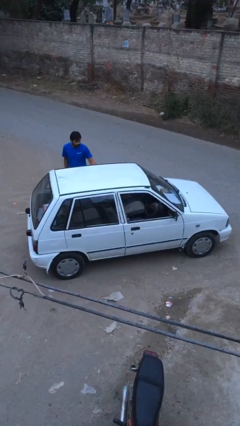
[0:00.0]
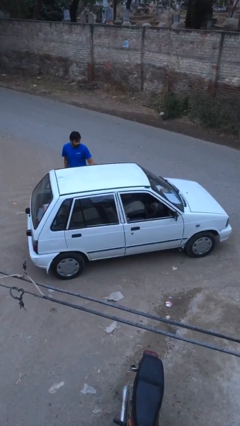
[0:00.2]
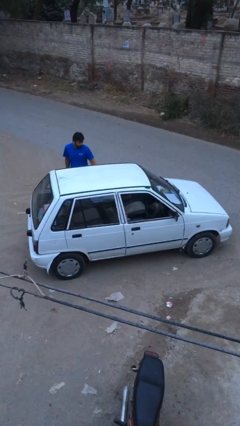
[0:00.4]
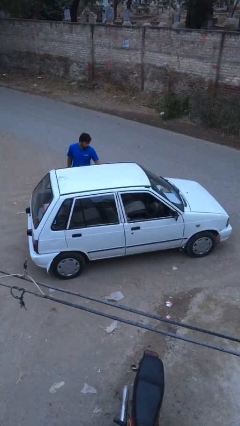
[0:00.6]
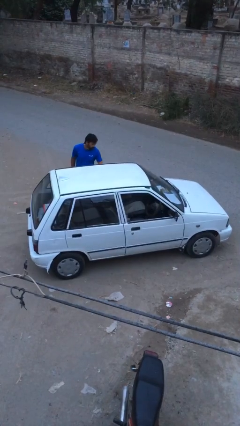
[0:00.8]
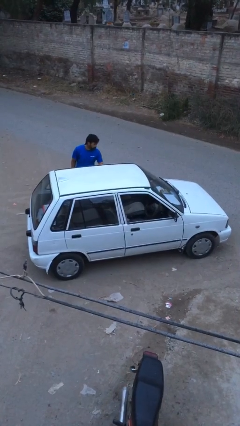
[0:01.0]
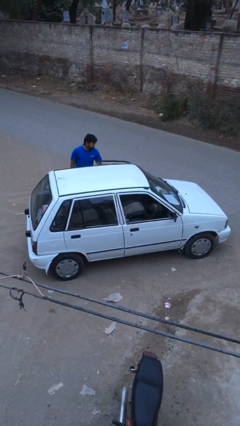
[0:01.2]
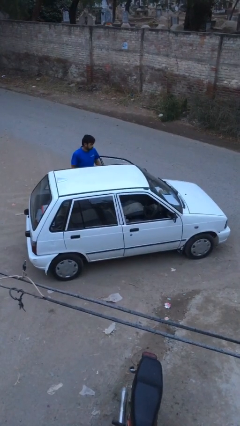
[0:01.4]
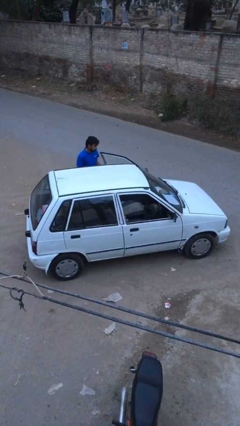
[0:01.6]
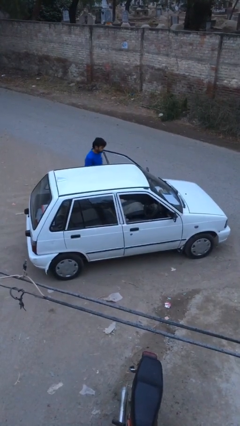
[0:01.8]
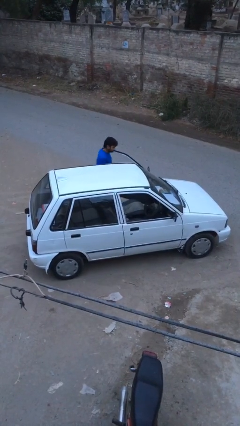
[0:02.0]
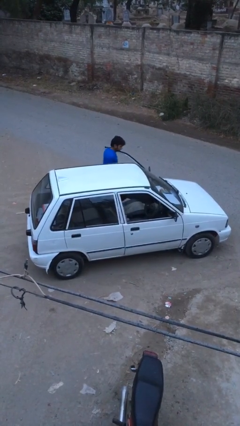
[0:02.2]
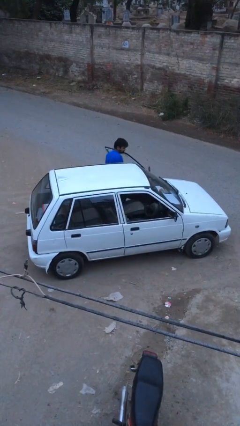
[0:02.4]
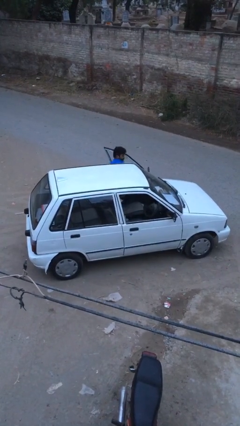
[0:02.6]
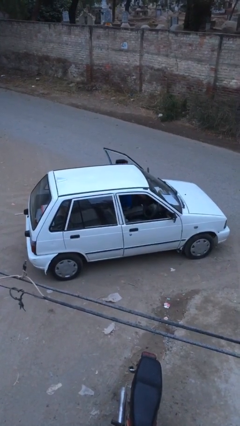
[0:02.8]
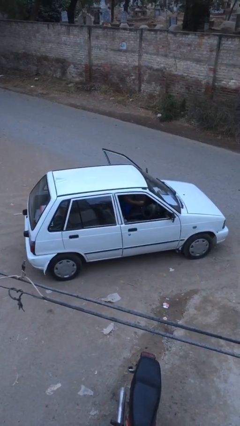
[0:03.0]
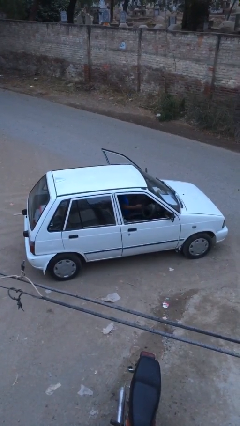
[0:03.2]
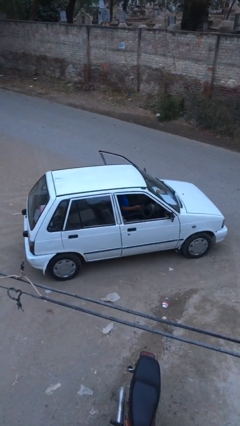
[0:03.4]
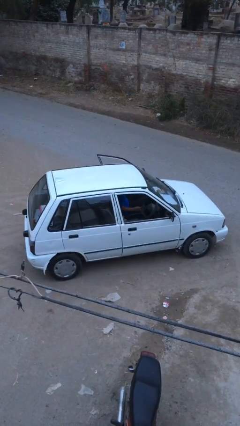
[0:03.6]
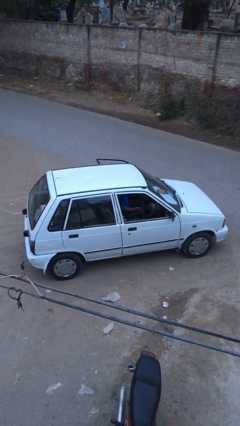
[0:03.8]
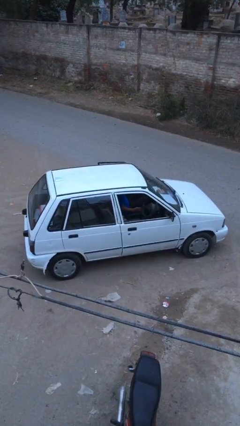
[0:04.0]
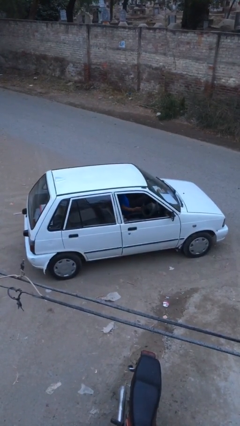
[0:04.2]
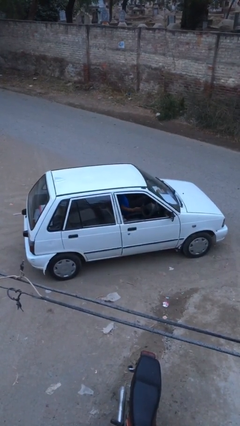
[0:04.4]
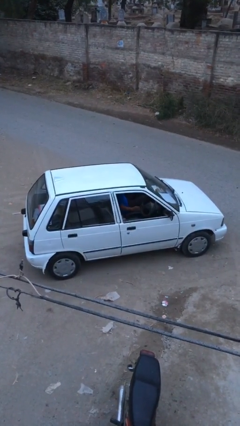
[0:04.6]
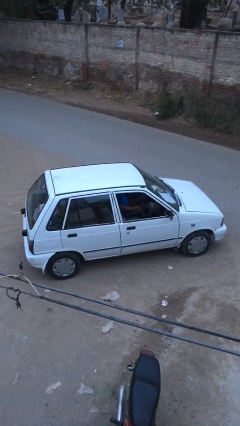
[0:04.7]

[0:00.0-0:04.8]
car picks up person

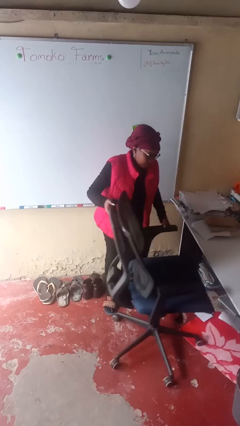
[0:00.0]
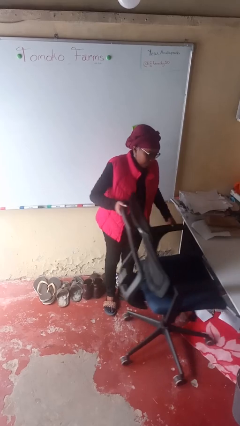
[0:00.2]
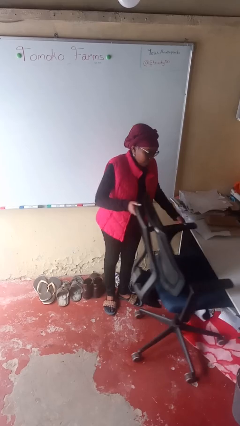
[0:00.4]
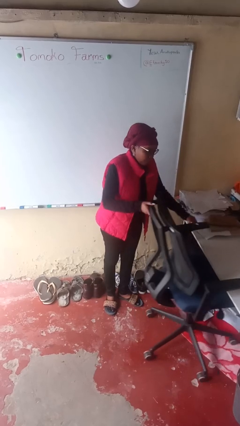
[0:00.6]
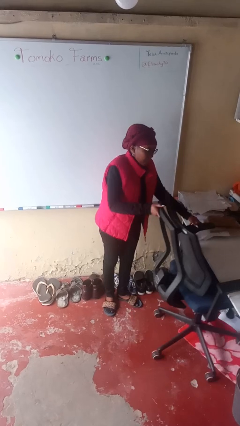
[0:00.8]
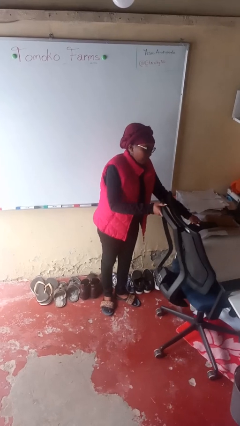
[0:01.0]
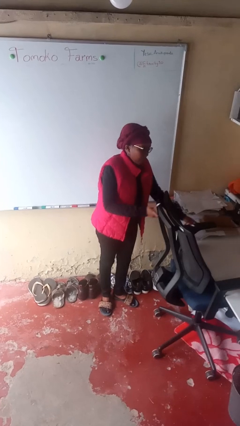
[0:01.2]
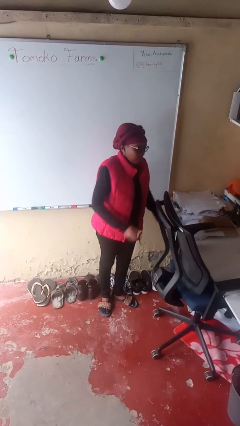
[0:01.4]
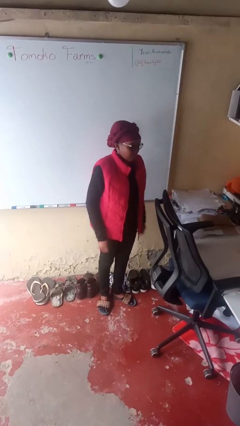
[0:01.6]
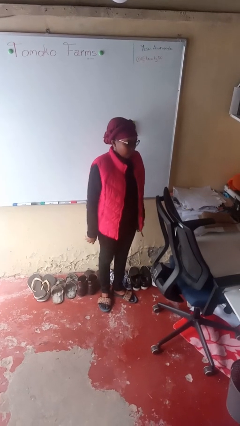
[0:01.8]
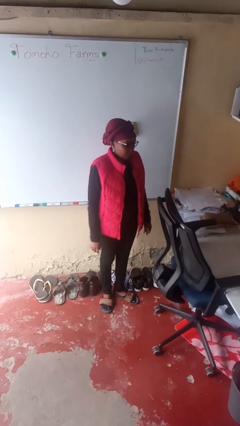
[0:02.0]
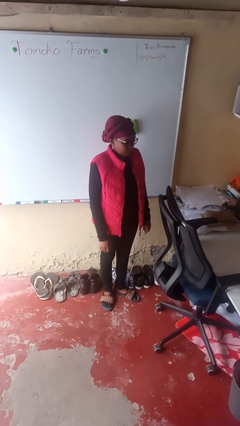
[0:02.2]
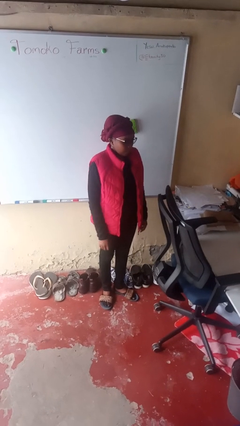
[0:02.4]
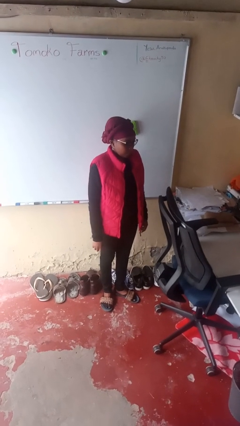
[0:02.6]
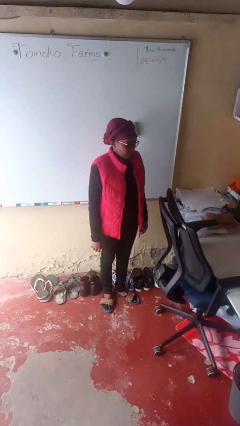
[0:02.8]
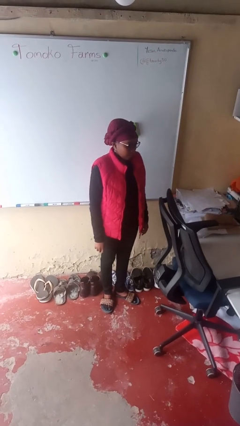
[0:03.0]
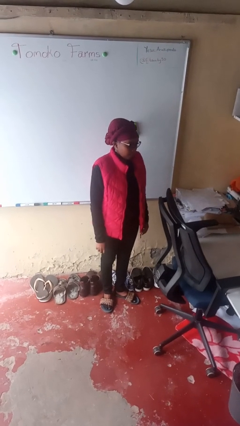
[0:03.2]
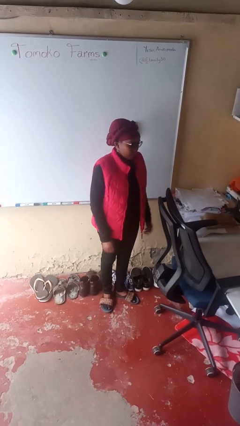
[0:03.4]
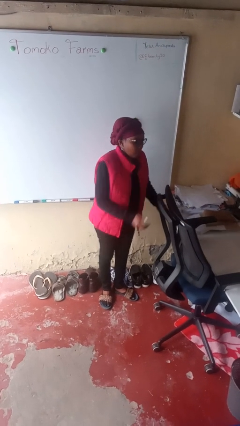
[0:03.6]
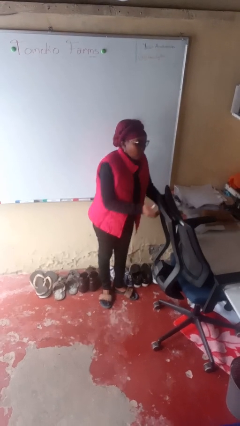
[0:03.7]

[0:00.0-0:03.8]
person pushes in chair

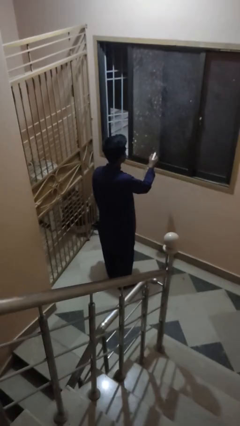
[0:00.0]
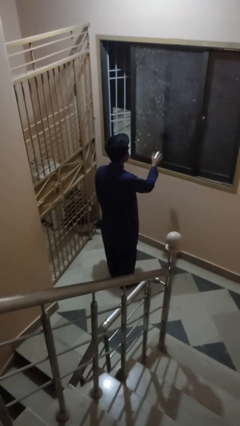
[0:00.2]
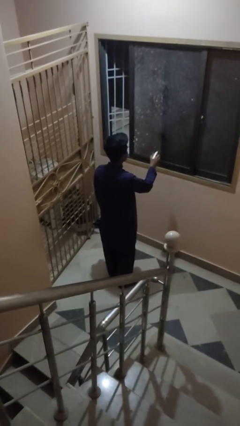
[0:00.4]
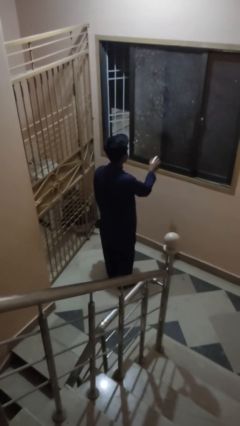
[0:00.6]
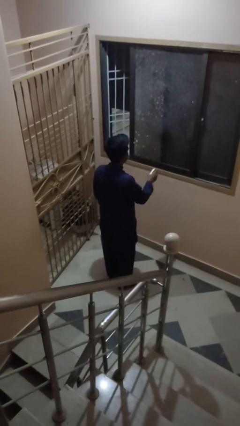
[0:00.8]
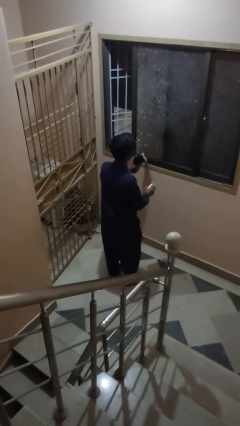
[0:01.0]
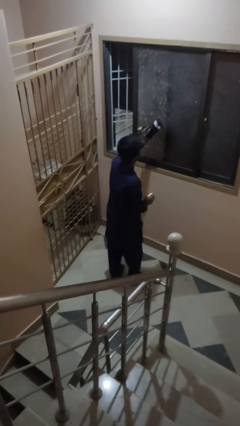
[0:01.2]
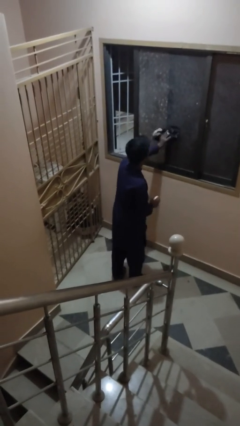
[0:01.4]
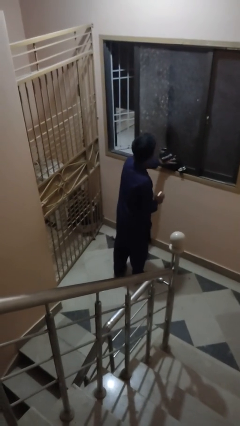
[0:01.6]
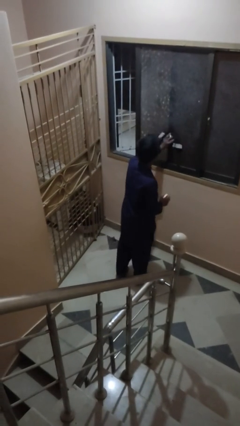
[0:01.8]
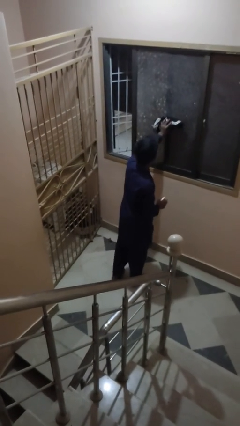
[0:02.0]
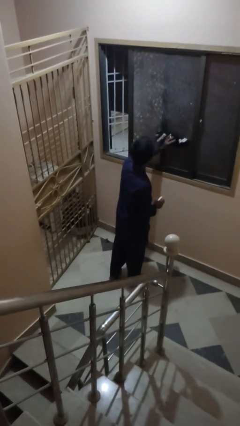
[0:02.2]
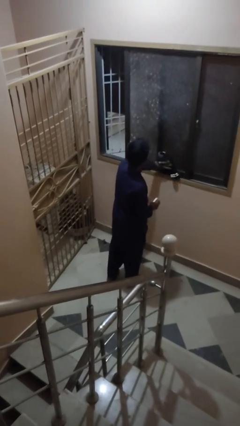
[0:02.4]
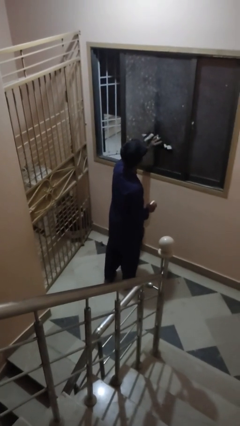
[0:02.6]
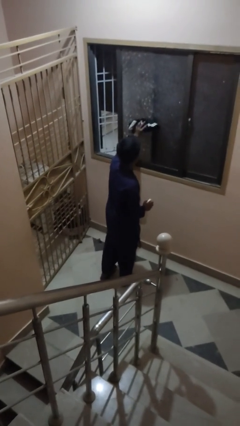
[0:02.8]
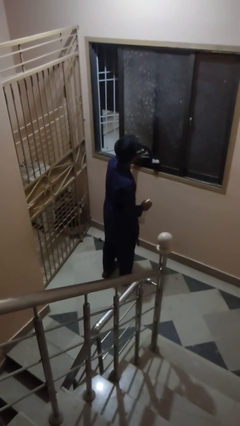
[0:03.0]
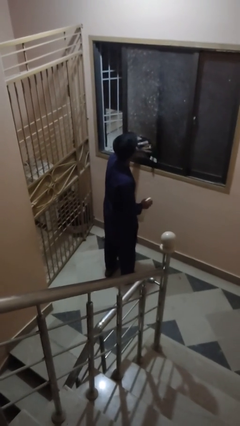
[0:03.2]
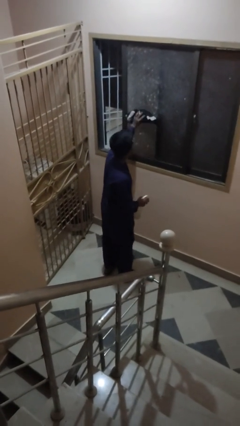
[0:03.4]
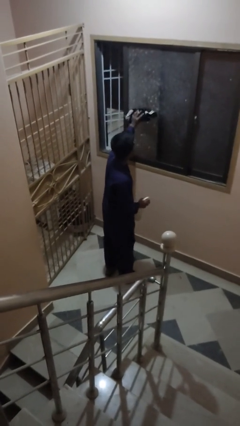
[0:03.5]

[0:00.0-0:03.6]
person washes window

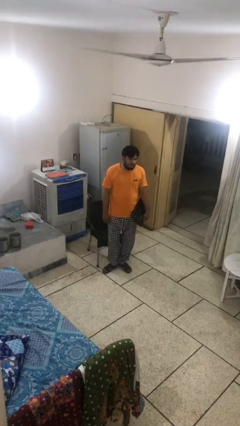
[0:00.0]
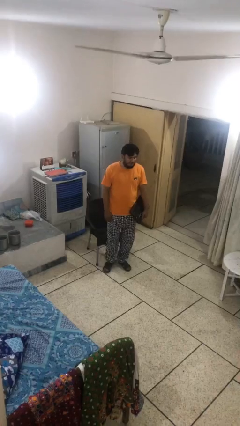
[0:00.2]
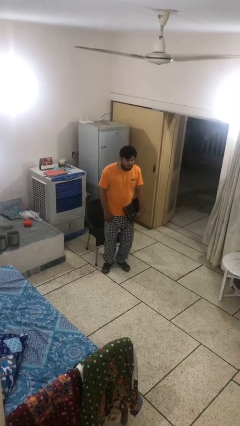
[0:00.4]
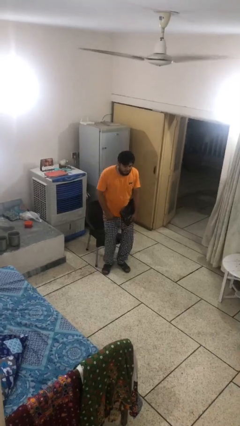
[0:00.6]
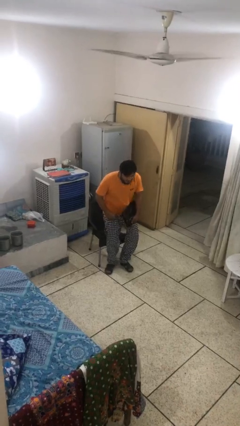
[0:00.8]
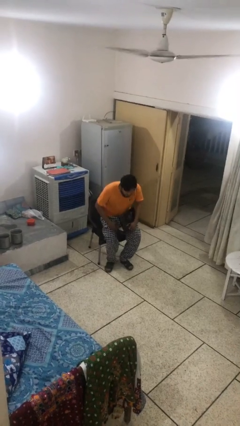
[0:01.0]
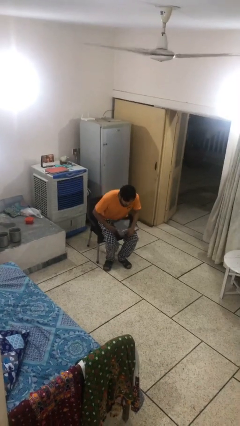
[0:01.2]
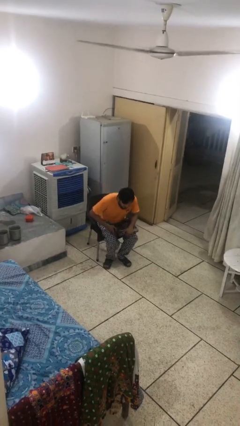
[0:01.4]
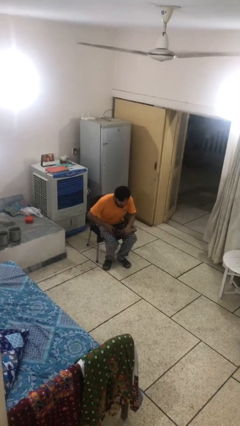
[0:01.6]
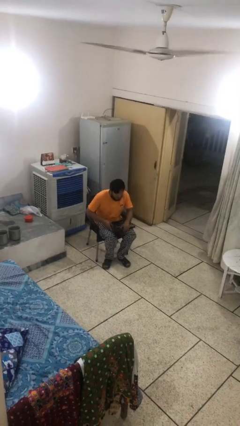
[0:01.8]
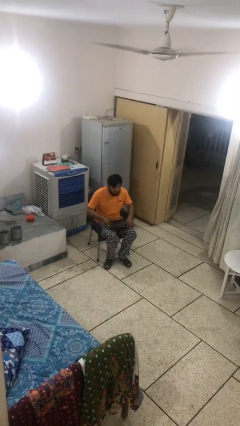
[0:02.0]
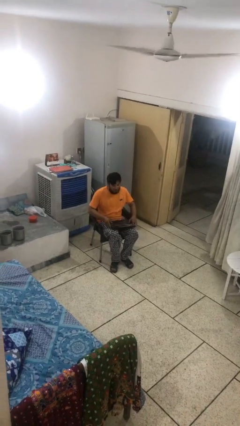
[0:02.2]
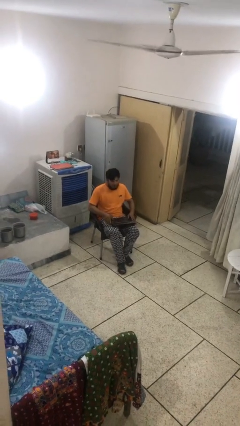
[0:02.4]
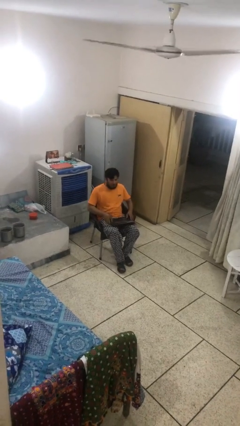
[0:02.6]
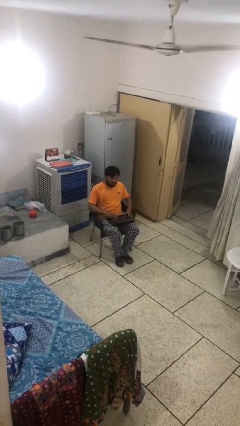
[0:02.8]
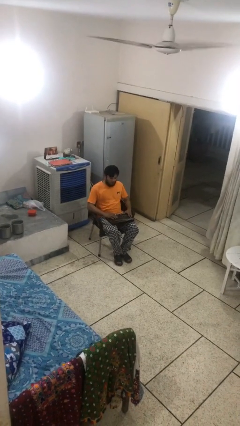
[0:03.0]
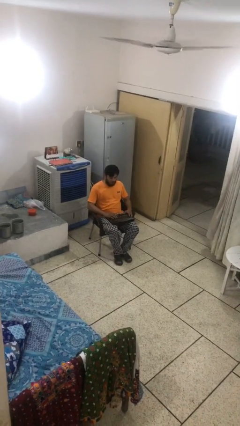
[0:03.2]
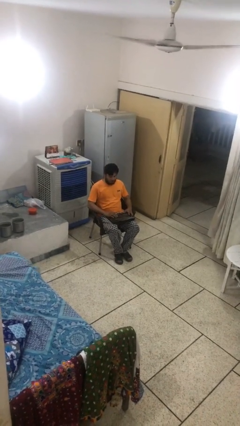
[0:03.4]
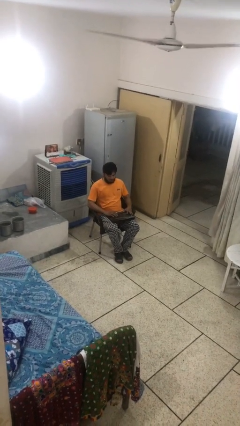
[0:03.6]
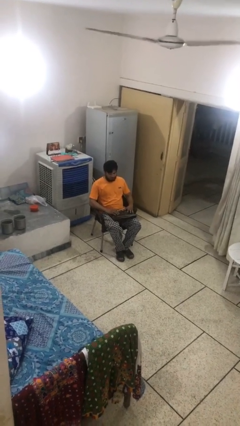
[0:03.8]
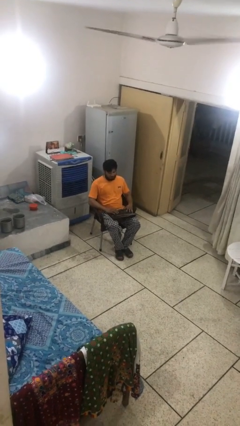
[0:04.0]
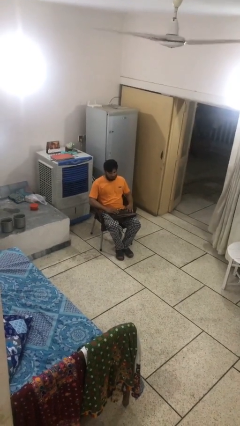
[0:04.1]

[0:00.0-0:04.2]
person sits down

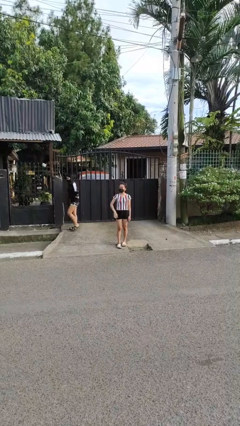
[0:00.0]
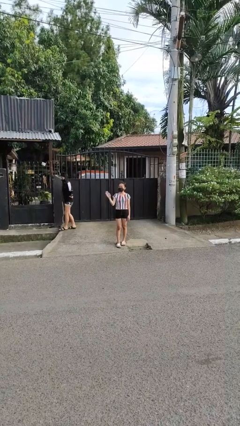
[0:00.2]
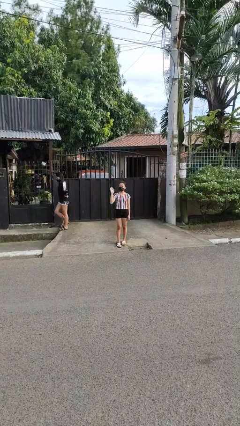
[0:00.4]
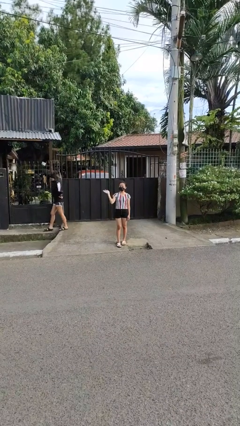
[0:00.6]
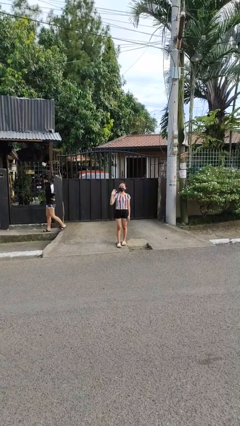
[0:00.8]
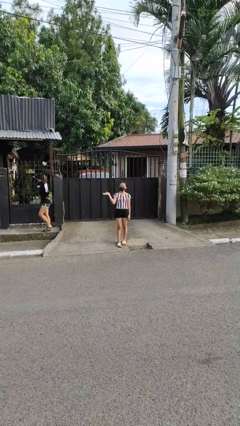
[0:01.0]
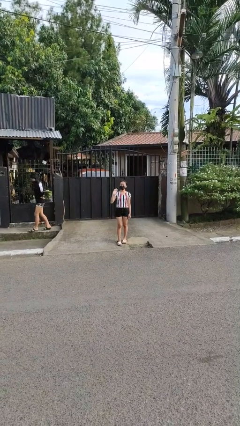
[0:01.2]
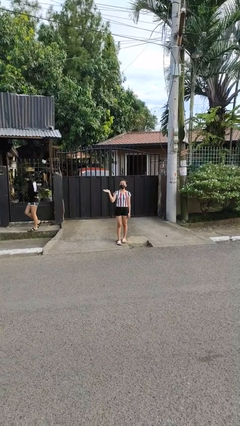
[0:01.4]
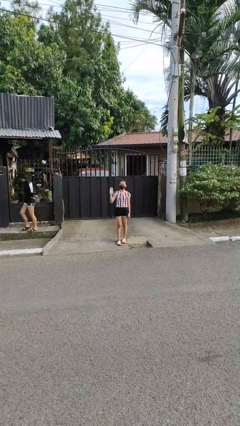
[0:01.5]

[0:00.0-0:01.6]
person waves at person
